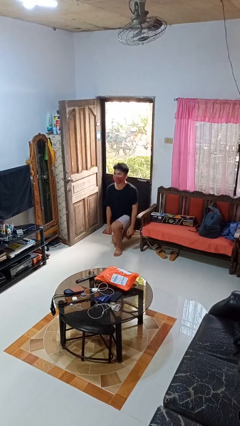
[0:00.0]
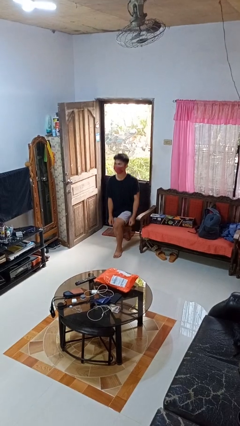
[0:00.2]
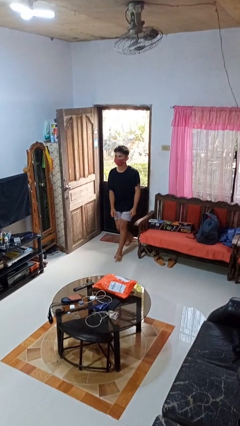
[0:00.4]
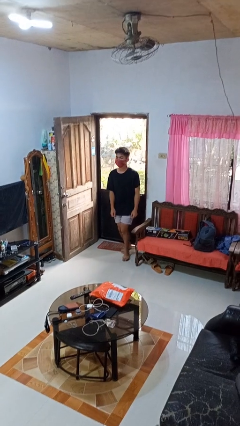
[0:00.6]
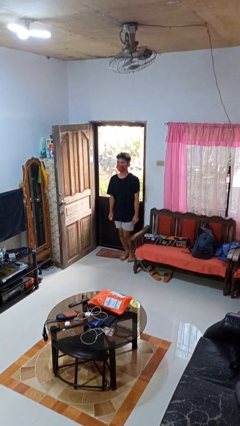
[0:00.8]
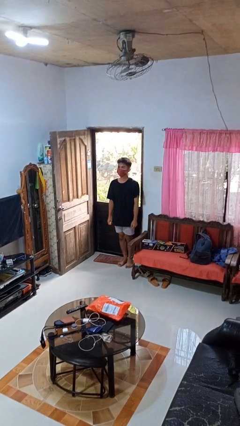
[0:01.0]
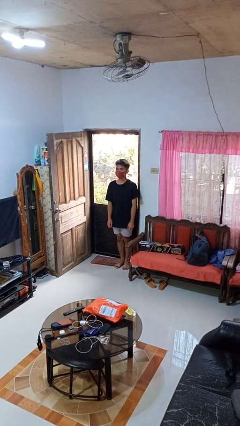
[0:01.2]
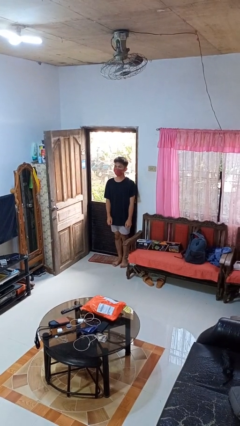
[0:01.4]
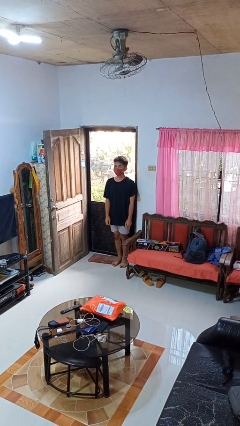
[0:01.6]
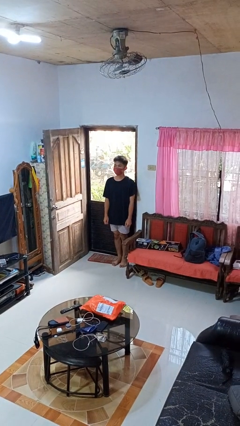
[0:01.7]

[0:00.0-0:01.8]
person stands up from floor

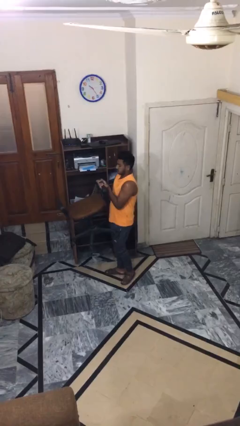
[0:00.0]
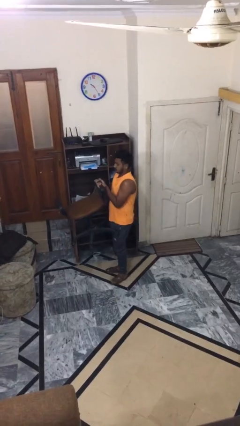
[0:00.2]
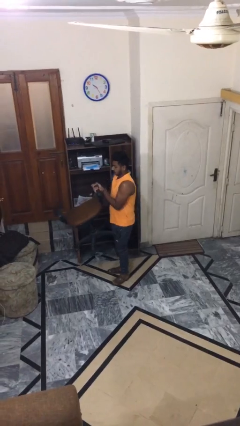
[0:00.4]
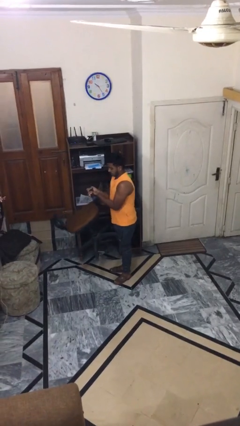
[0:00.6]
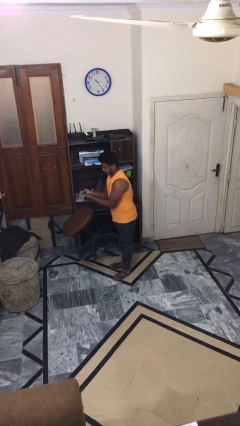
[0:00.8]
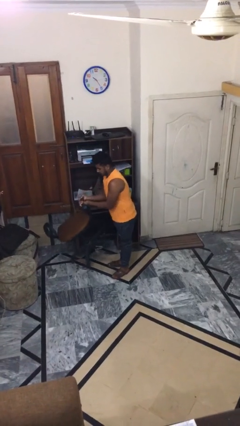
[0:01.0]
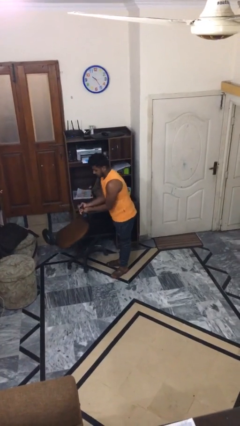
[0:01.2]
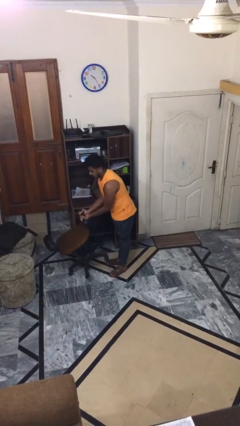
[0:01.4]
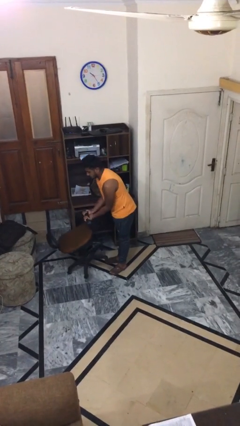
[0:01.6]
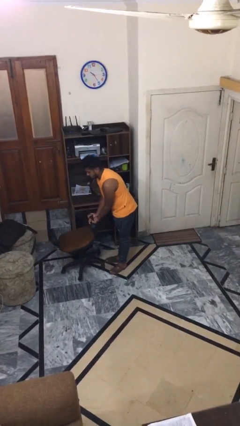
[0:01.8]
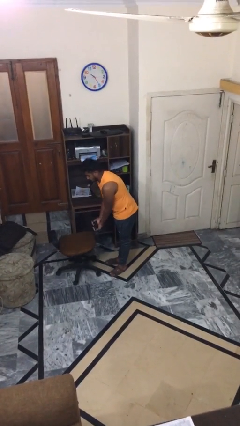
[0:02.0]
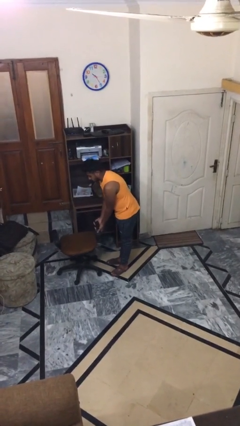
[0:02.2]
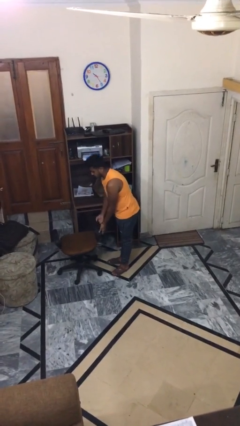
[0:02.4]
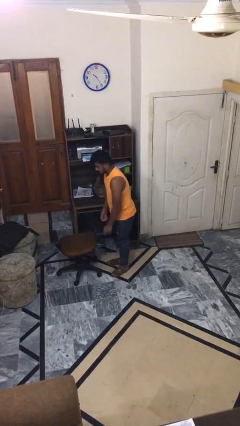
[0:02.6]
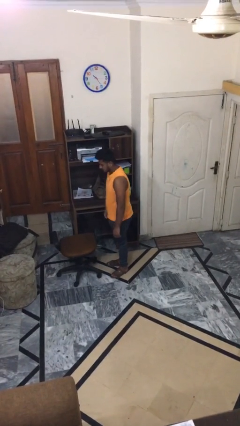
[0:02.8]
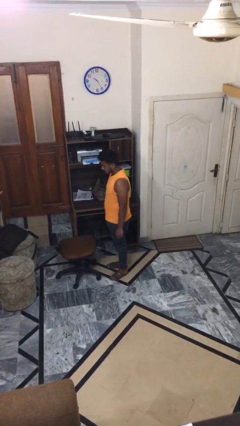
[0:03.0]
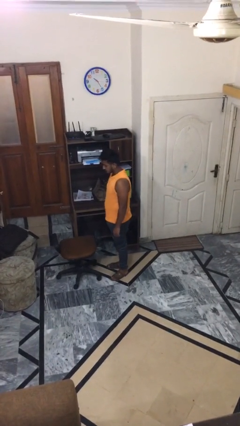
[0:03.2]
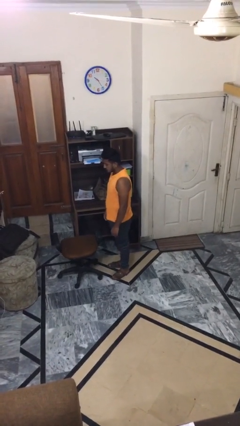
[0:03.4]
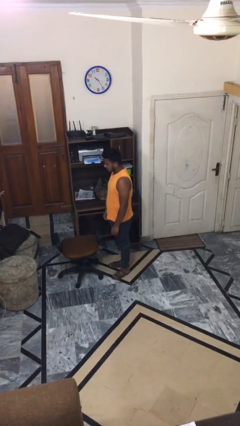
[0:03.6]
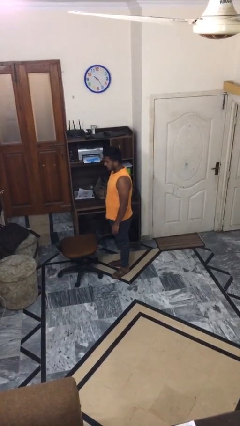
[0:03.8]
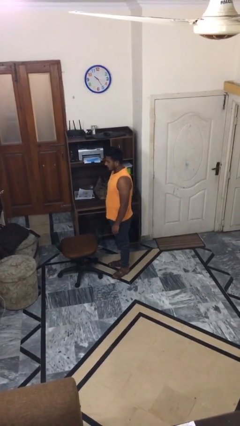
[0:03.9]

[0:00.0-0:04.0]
person puts down object on floor

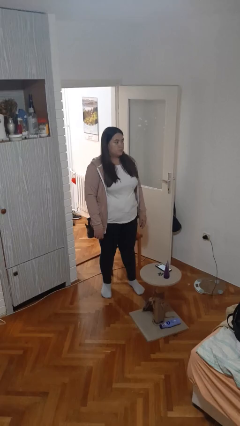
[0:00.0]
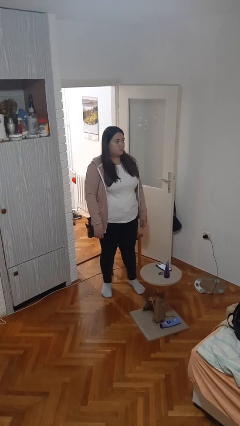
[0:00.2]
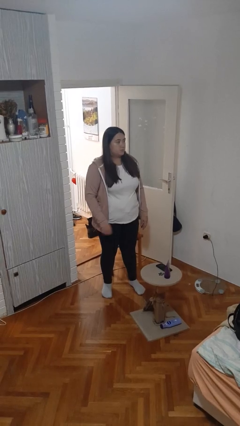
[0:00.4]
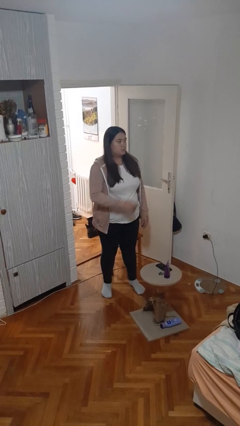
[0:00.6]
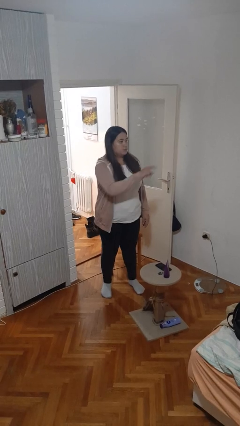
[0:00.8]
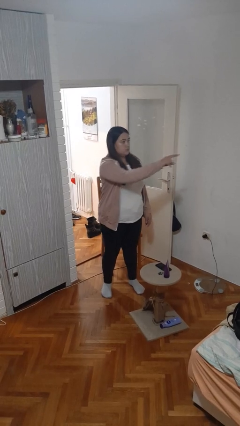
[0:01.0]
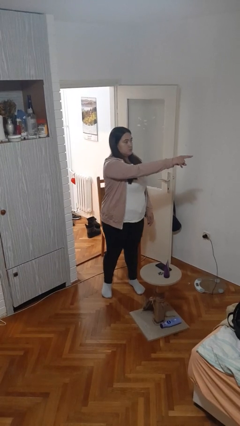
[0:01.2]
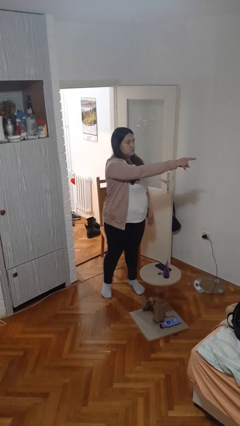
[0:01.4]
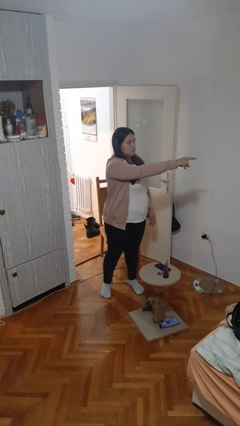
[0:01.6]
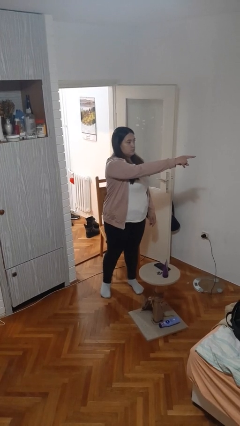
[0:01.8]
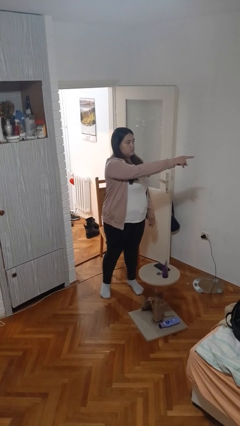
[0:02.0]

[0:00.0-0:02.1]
person points at person

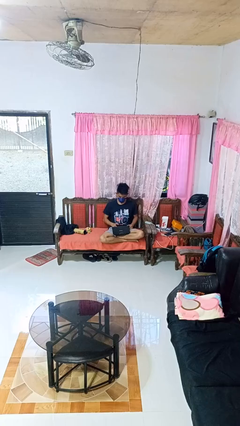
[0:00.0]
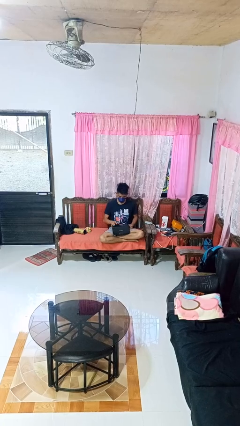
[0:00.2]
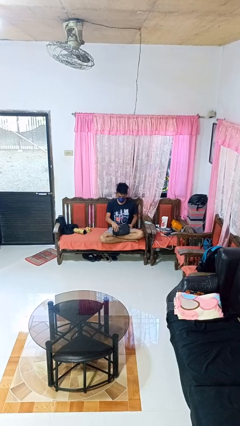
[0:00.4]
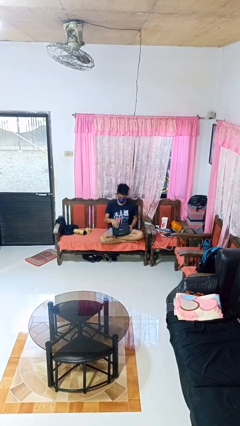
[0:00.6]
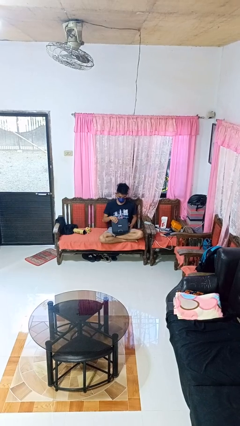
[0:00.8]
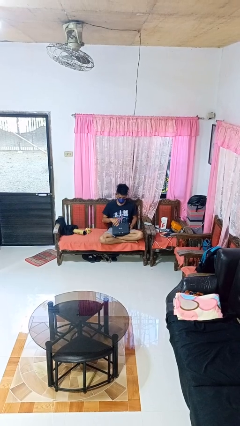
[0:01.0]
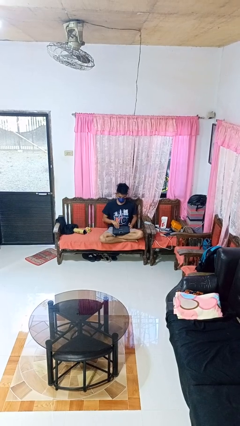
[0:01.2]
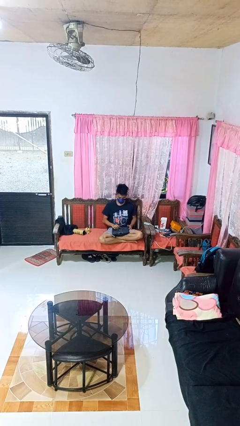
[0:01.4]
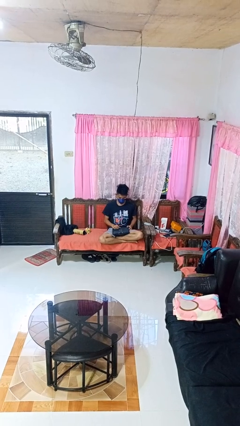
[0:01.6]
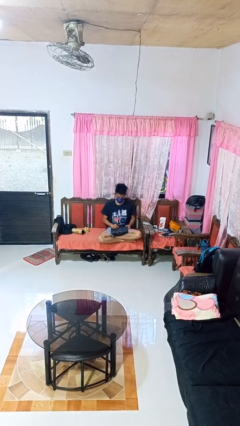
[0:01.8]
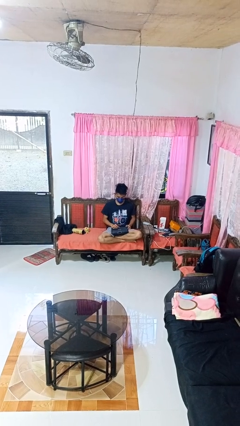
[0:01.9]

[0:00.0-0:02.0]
person closes laptop

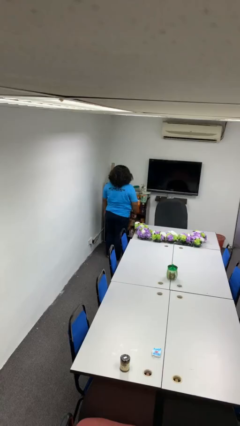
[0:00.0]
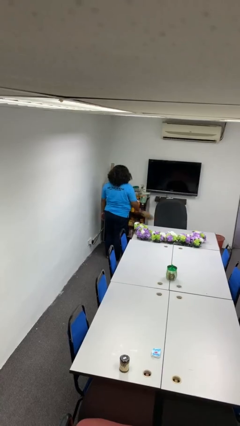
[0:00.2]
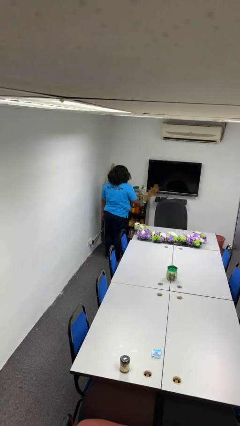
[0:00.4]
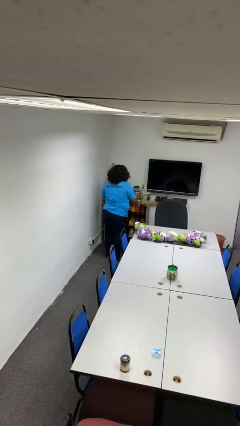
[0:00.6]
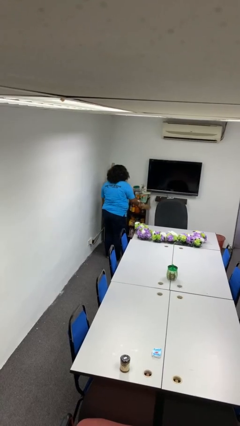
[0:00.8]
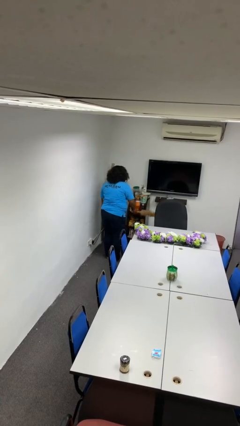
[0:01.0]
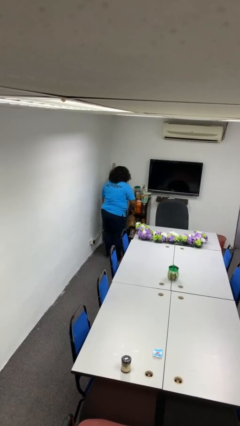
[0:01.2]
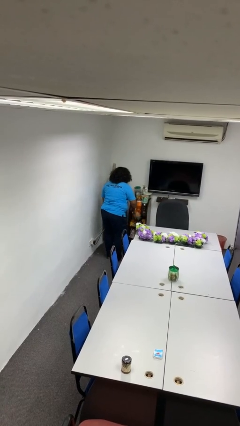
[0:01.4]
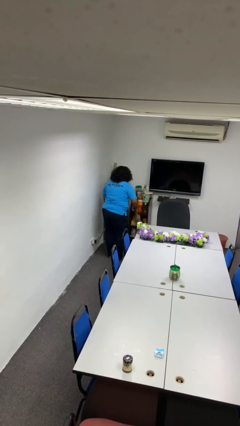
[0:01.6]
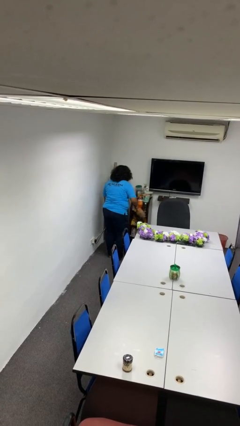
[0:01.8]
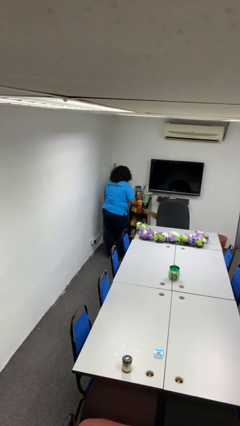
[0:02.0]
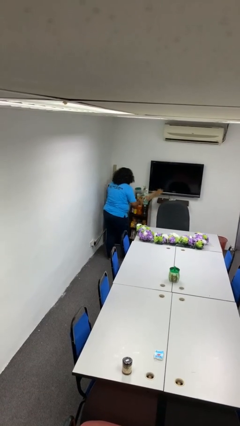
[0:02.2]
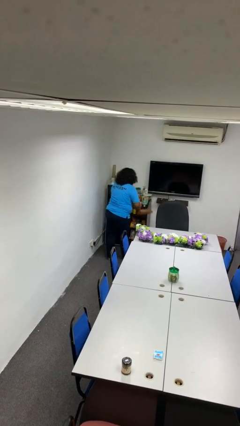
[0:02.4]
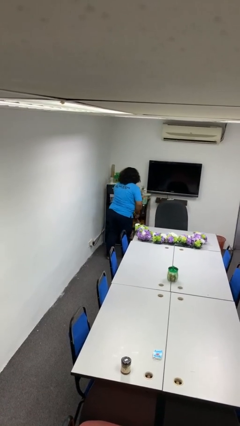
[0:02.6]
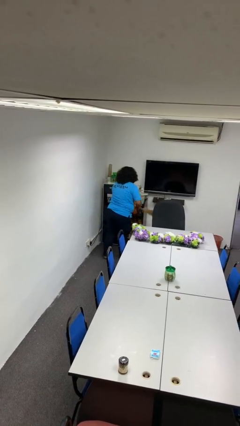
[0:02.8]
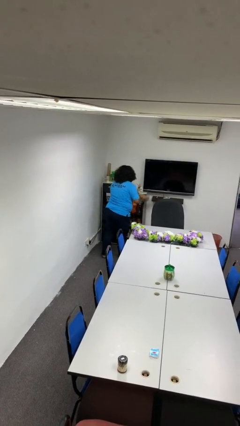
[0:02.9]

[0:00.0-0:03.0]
person dusts furniture

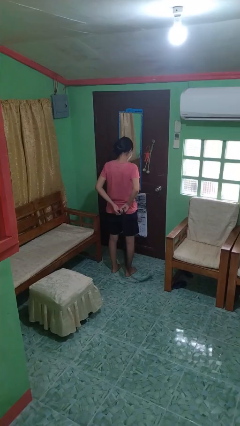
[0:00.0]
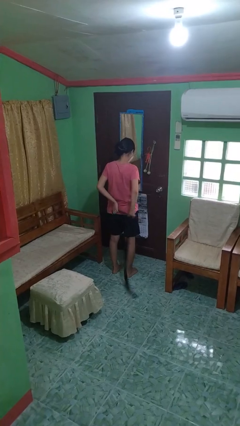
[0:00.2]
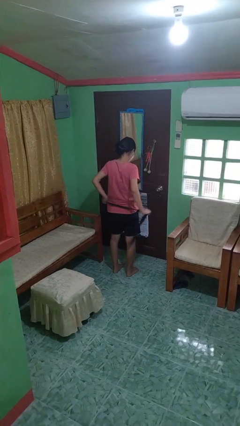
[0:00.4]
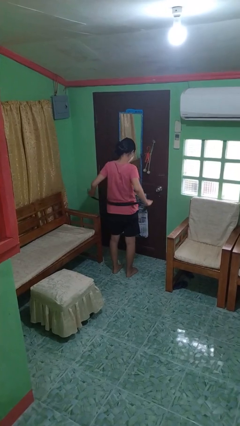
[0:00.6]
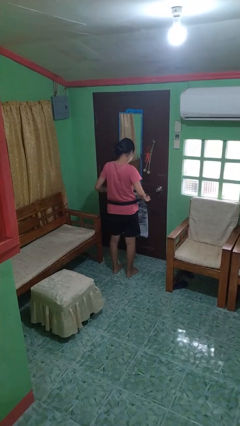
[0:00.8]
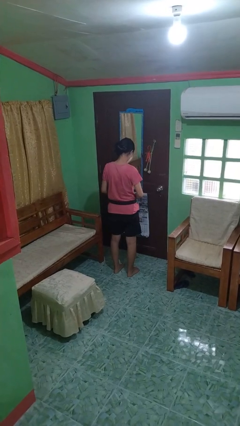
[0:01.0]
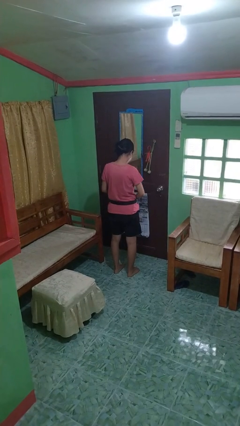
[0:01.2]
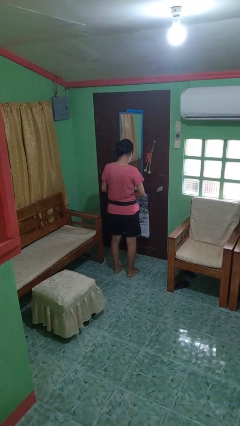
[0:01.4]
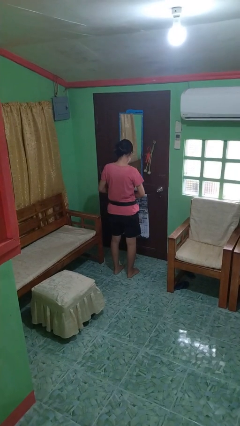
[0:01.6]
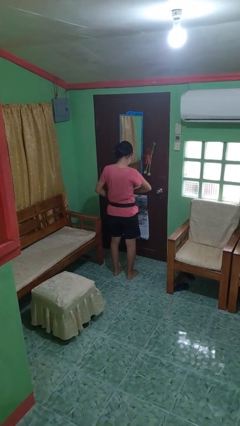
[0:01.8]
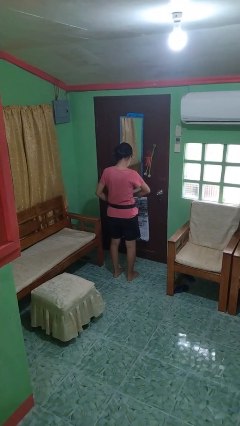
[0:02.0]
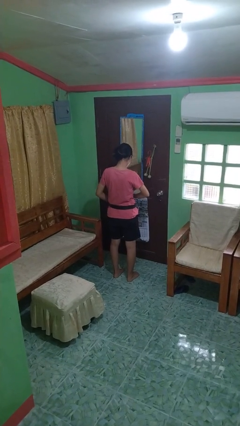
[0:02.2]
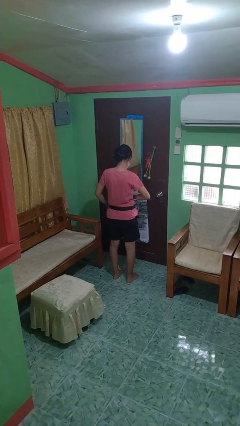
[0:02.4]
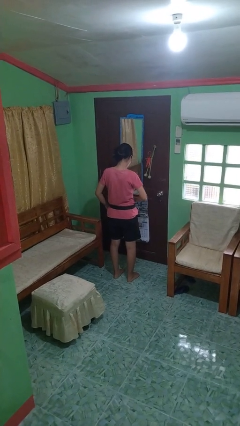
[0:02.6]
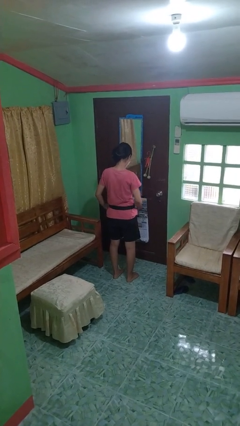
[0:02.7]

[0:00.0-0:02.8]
person puts on belt

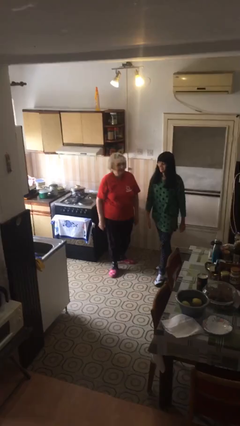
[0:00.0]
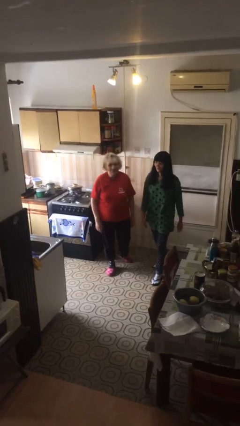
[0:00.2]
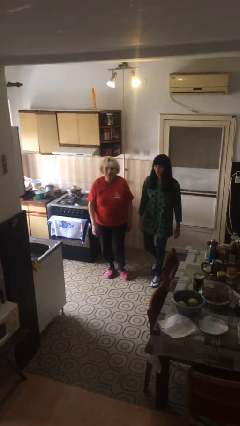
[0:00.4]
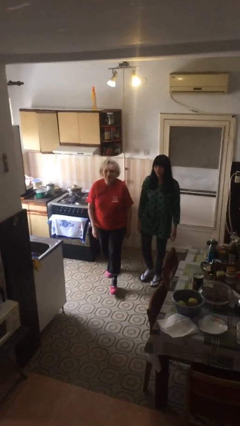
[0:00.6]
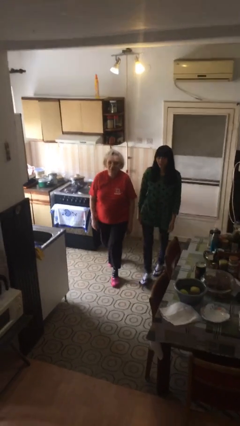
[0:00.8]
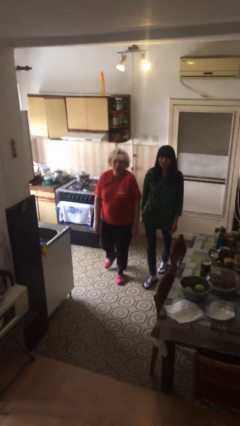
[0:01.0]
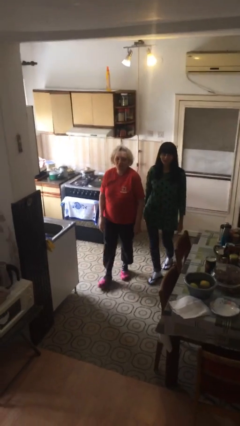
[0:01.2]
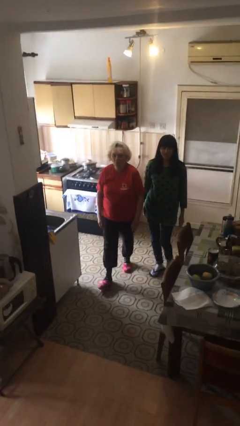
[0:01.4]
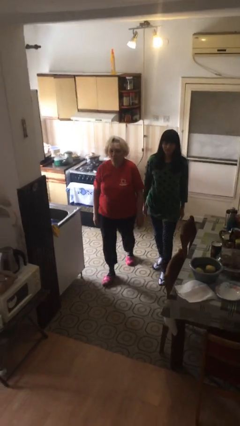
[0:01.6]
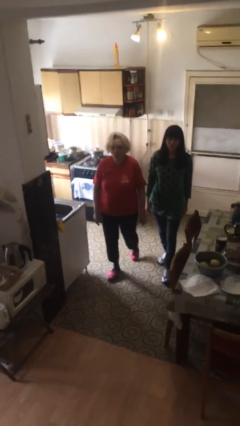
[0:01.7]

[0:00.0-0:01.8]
person talks to person
